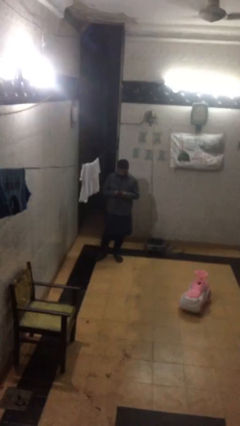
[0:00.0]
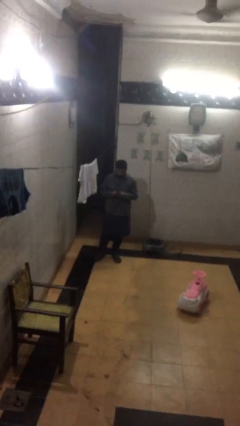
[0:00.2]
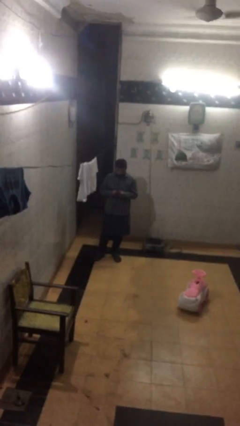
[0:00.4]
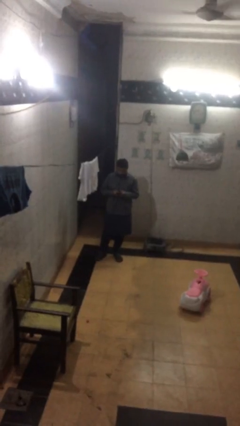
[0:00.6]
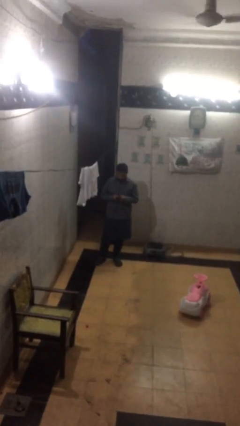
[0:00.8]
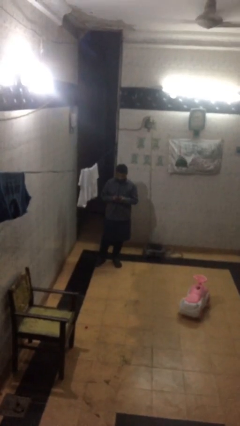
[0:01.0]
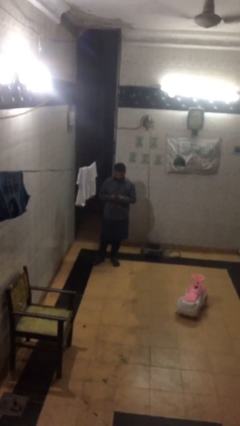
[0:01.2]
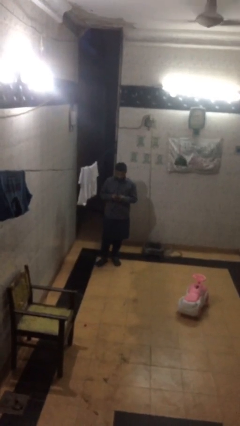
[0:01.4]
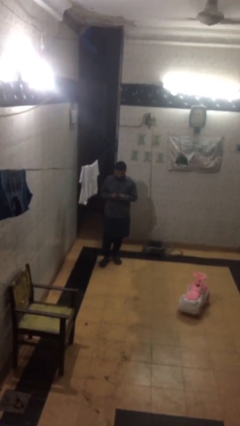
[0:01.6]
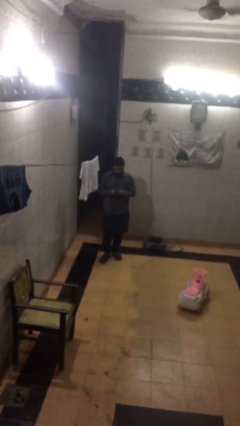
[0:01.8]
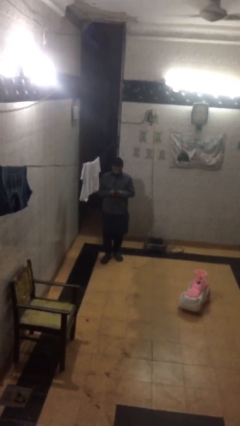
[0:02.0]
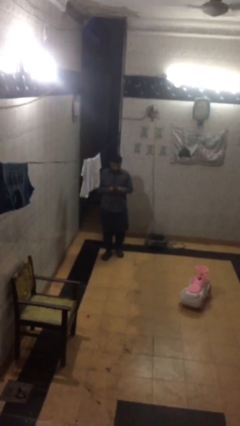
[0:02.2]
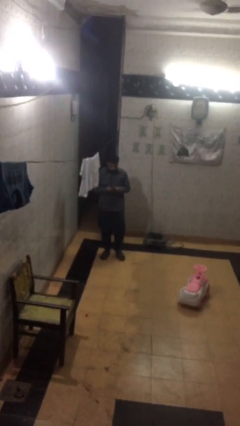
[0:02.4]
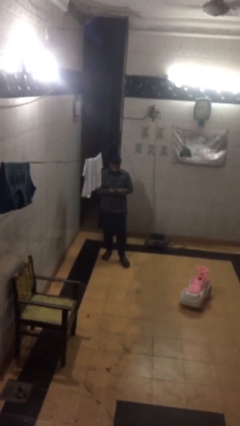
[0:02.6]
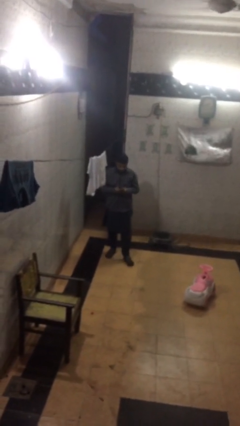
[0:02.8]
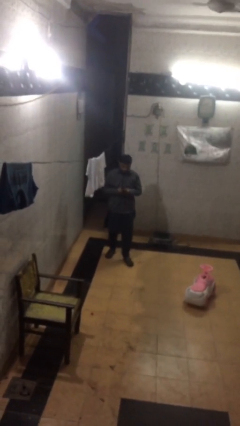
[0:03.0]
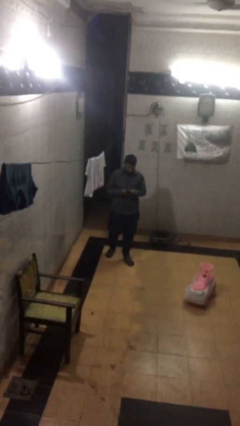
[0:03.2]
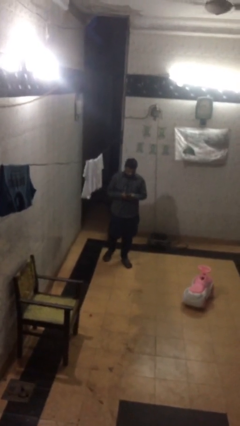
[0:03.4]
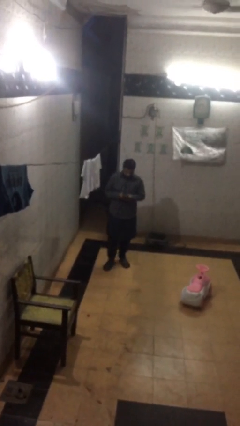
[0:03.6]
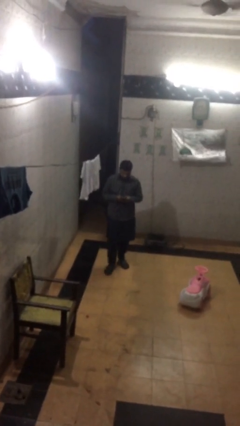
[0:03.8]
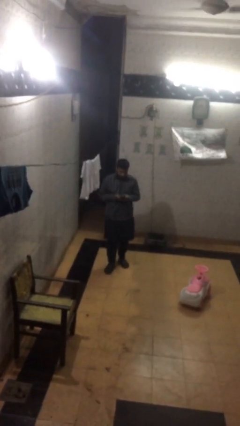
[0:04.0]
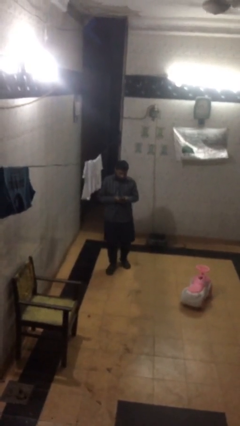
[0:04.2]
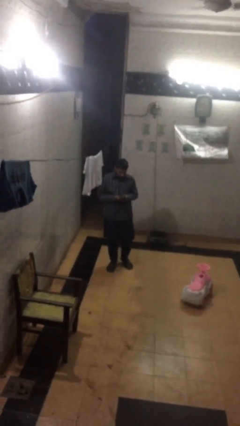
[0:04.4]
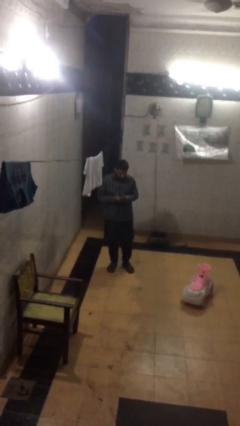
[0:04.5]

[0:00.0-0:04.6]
person texts on phone

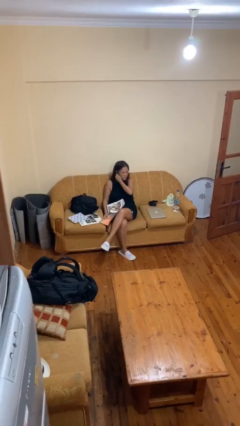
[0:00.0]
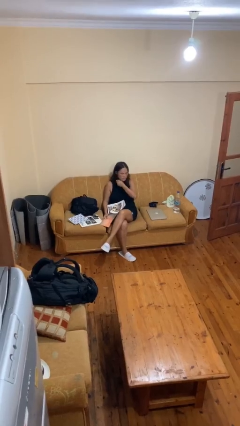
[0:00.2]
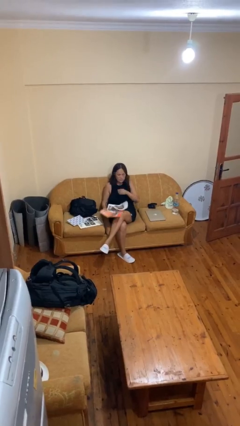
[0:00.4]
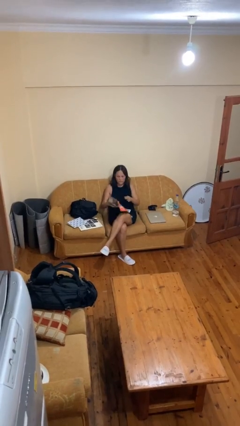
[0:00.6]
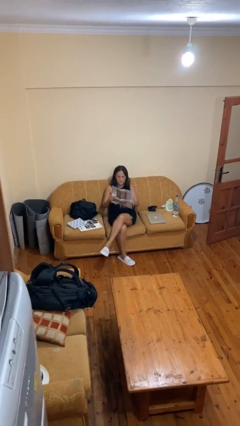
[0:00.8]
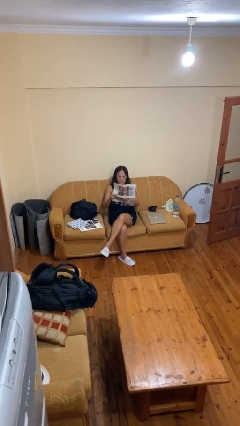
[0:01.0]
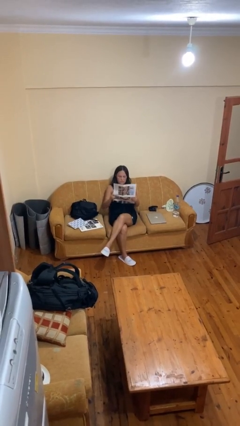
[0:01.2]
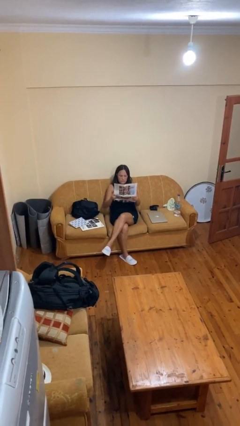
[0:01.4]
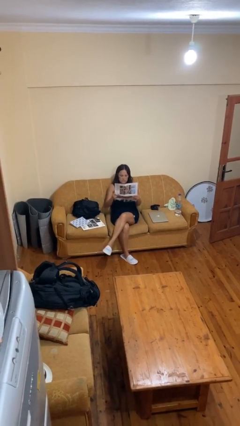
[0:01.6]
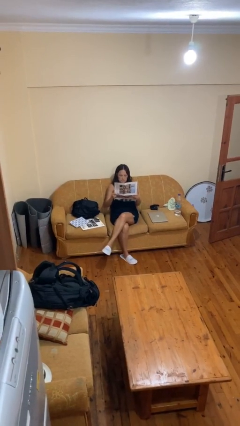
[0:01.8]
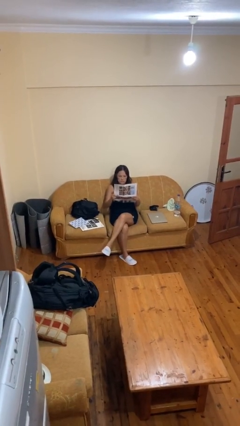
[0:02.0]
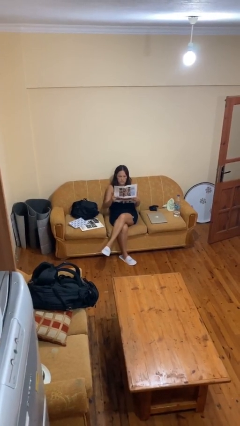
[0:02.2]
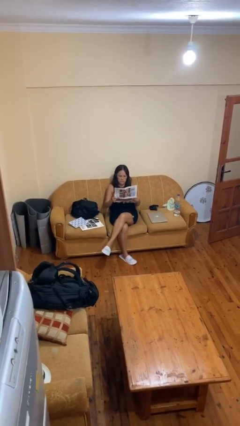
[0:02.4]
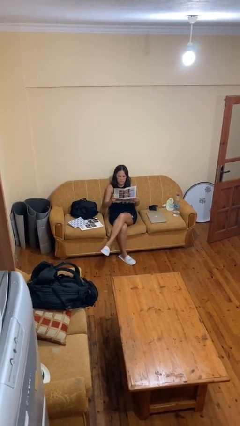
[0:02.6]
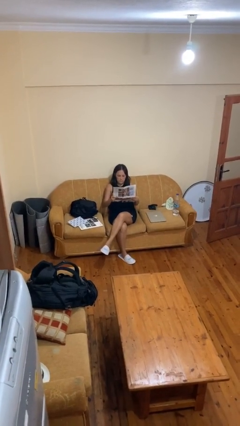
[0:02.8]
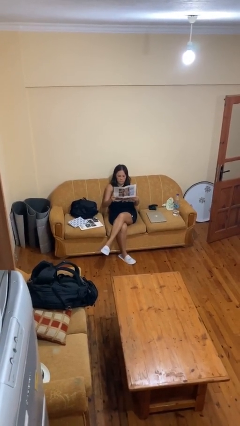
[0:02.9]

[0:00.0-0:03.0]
person reads newspaper

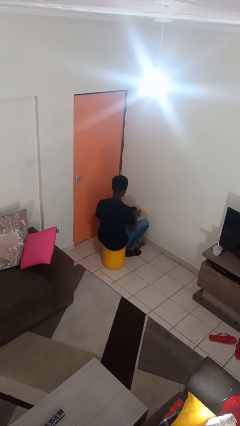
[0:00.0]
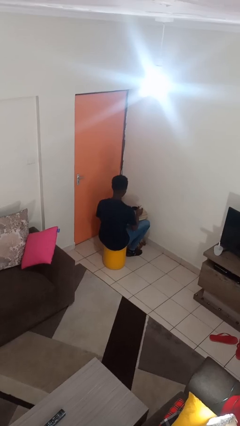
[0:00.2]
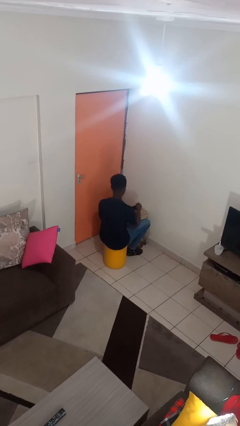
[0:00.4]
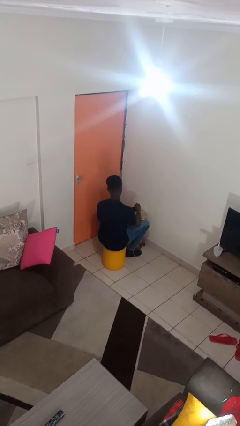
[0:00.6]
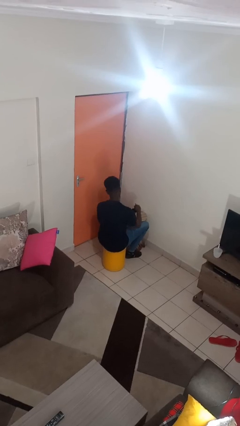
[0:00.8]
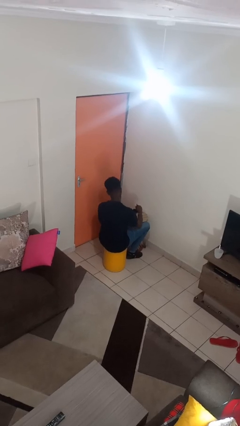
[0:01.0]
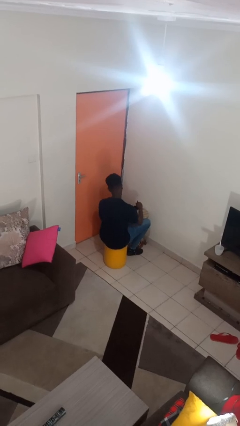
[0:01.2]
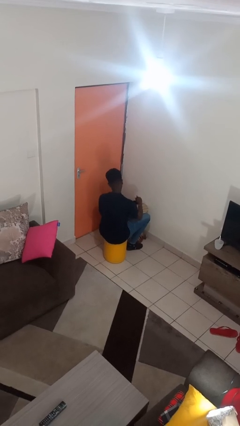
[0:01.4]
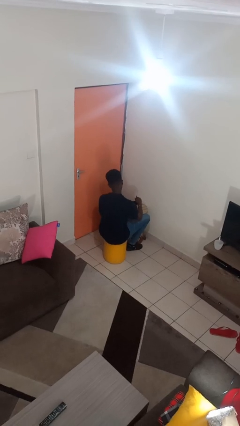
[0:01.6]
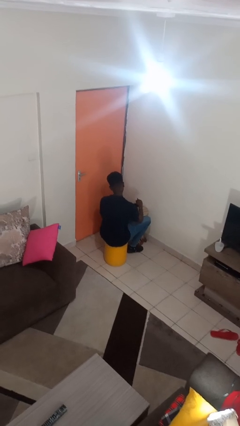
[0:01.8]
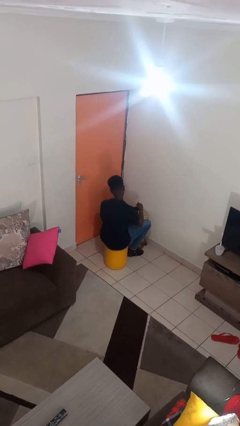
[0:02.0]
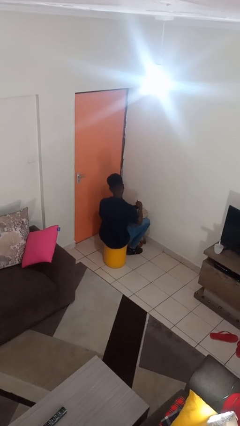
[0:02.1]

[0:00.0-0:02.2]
person stirs mug

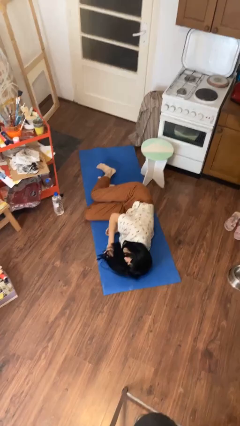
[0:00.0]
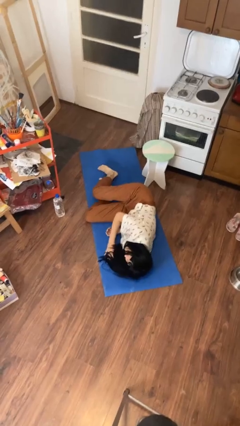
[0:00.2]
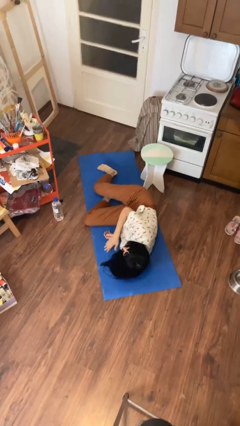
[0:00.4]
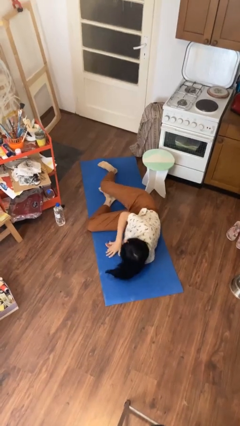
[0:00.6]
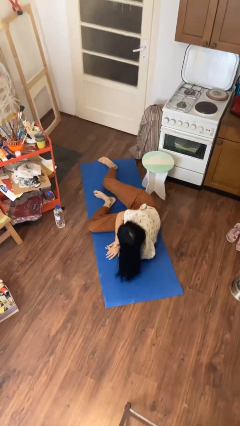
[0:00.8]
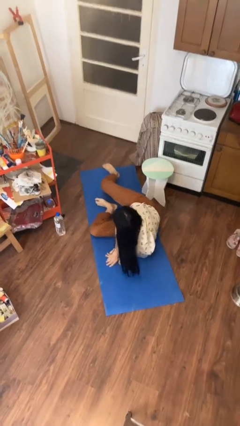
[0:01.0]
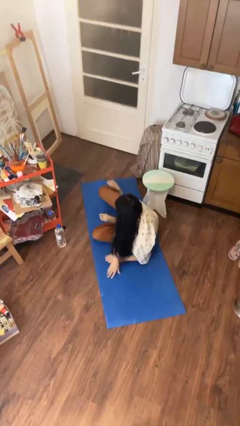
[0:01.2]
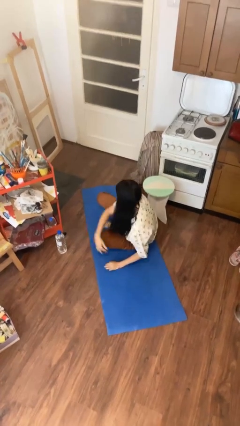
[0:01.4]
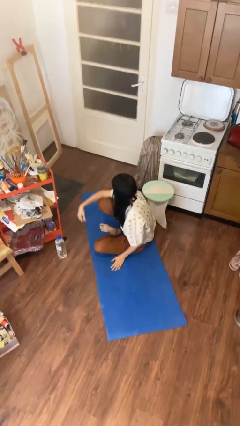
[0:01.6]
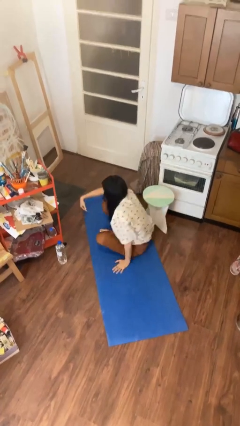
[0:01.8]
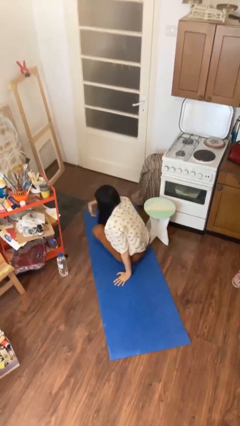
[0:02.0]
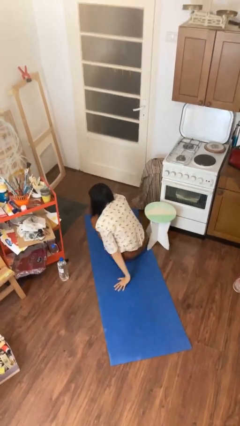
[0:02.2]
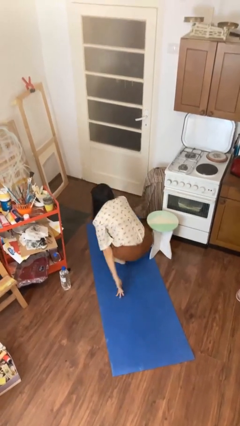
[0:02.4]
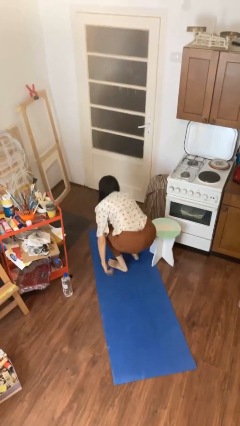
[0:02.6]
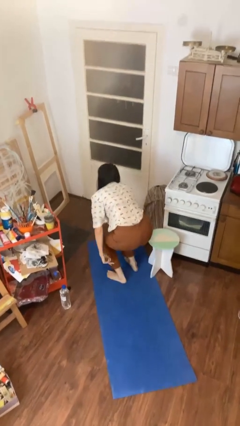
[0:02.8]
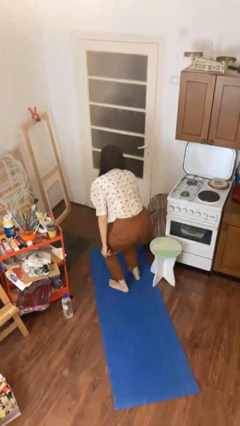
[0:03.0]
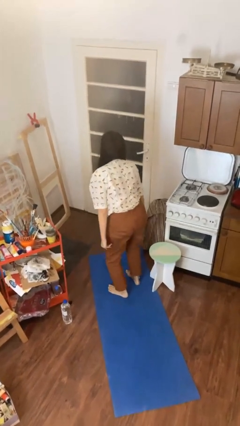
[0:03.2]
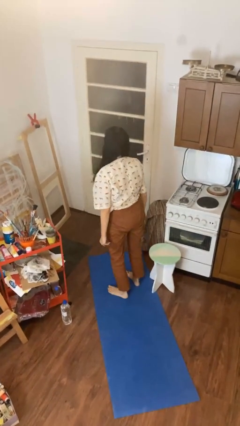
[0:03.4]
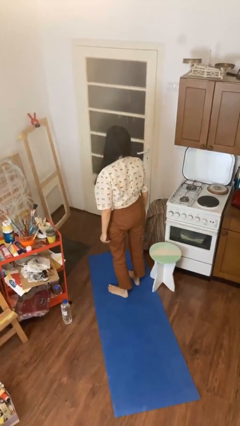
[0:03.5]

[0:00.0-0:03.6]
person stands up from floor

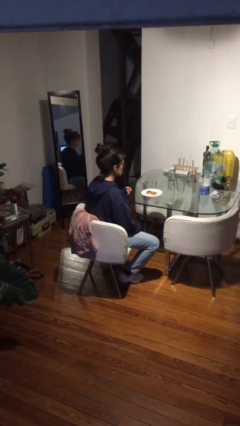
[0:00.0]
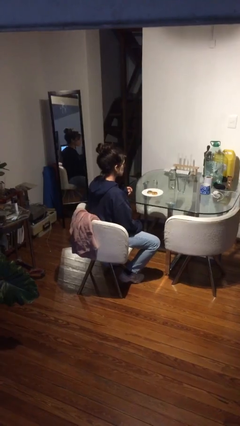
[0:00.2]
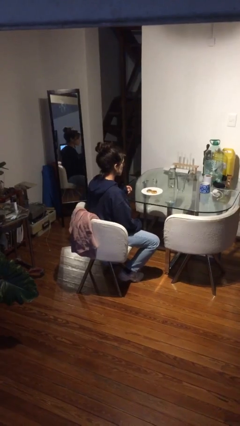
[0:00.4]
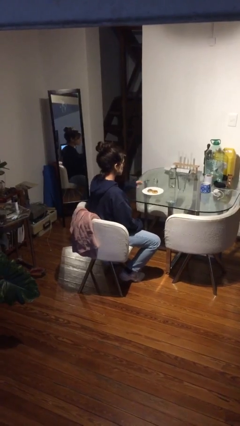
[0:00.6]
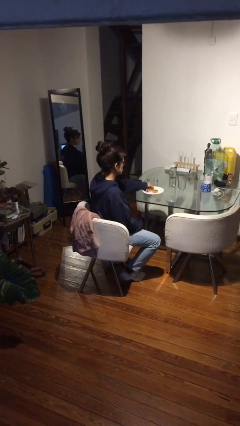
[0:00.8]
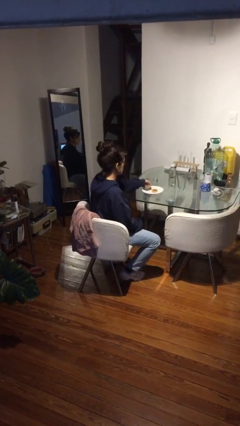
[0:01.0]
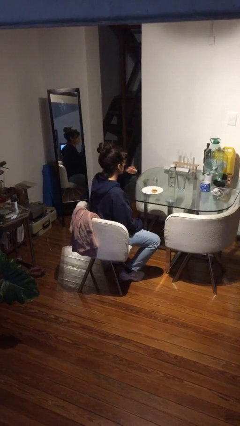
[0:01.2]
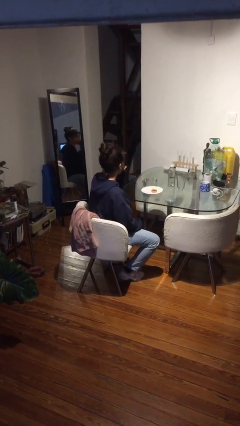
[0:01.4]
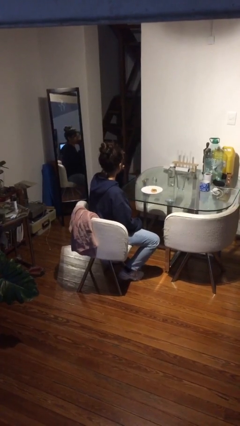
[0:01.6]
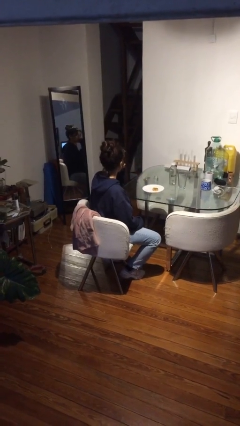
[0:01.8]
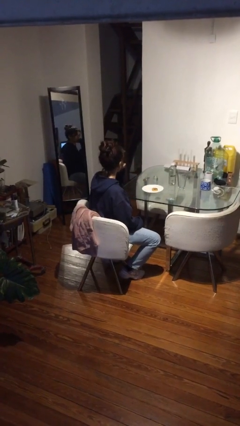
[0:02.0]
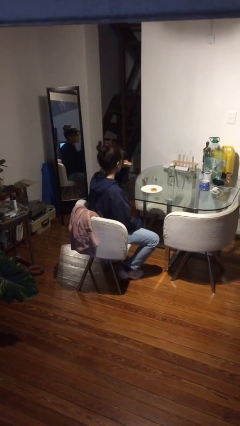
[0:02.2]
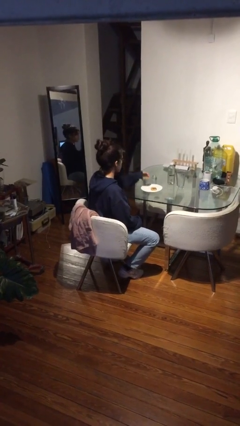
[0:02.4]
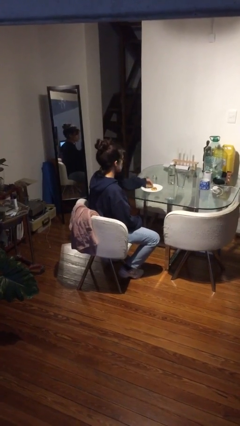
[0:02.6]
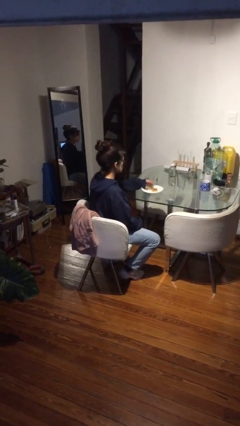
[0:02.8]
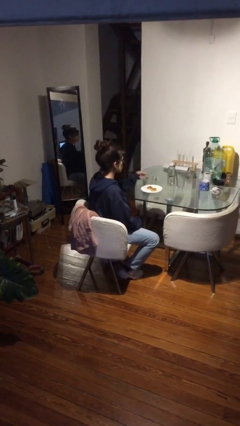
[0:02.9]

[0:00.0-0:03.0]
person eats with hands

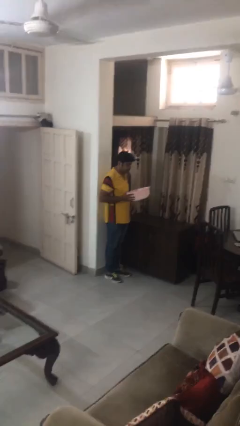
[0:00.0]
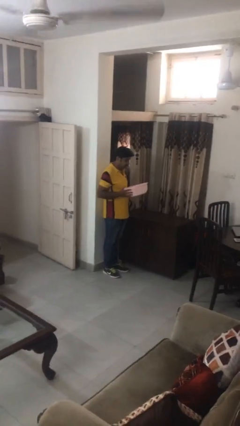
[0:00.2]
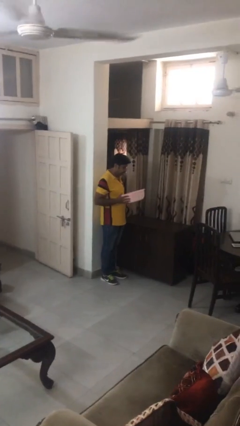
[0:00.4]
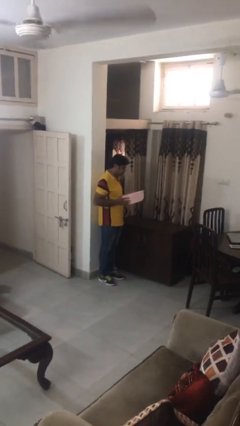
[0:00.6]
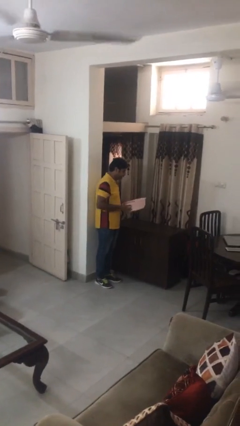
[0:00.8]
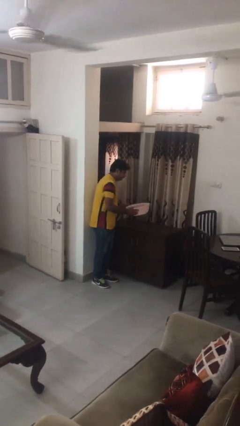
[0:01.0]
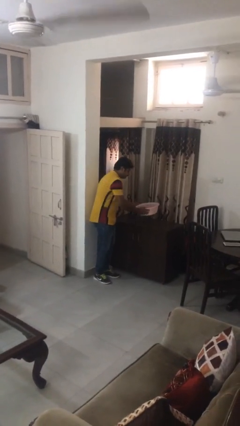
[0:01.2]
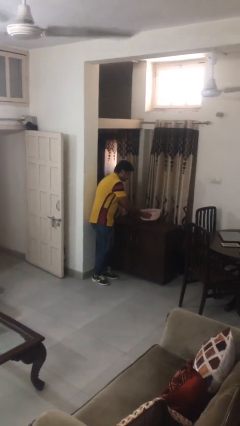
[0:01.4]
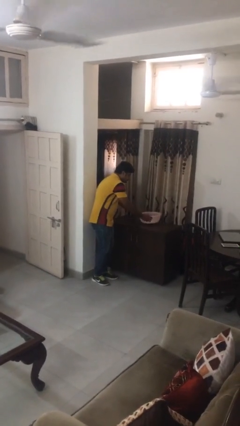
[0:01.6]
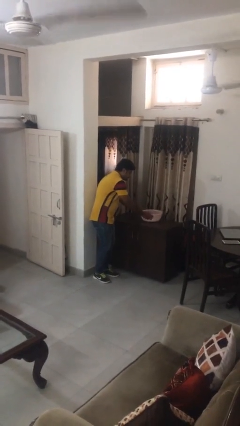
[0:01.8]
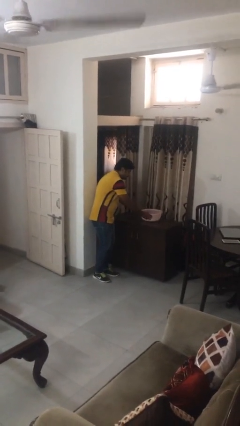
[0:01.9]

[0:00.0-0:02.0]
person puts down object on countertop
